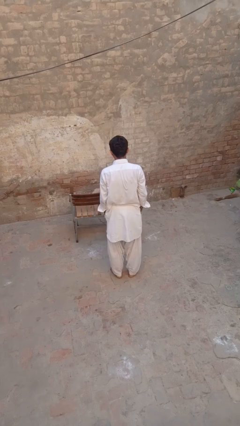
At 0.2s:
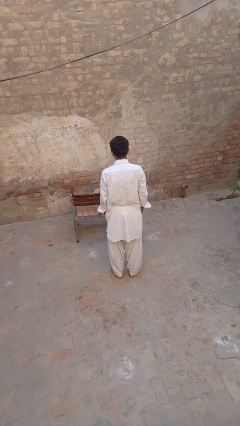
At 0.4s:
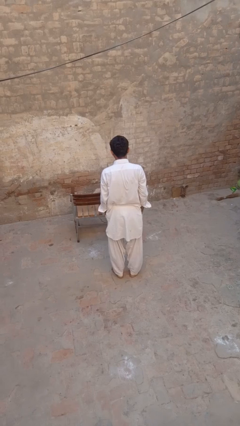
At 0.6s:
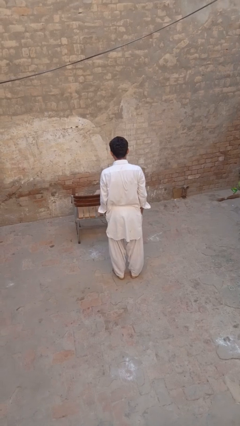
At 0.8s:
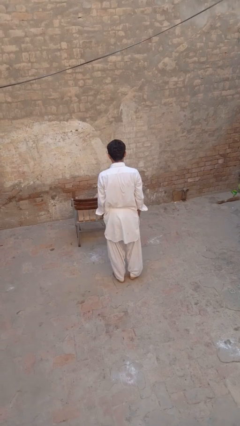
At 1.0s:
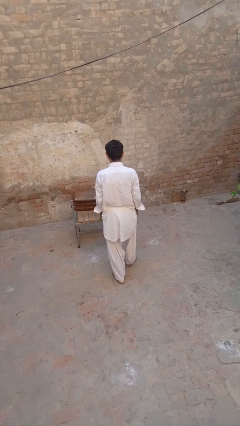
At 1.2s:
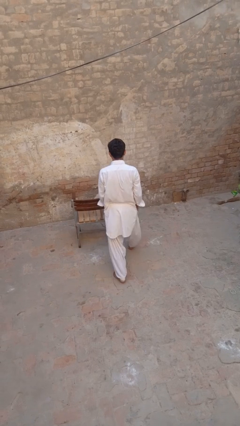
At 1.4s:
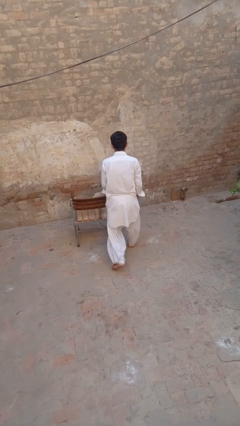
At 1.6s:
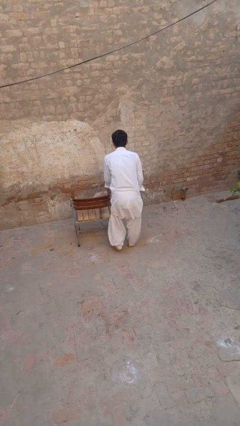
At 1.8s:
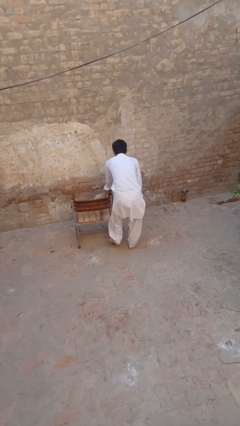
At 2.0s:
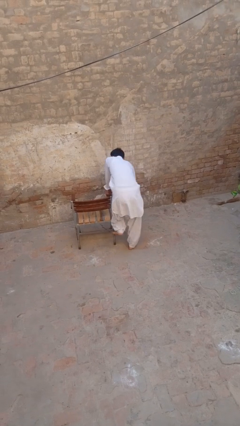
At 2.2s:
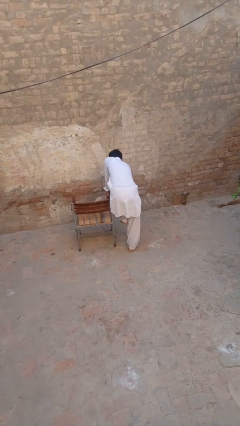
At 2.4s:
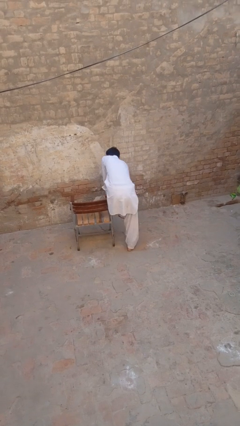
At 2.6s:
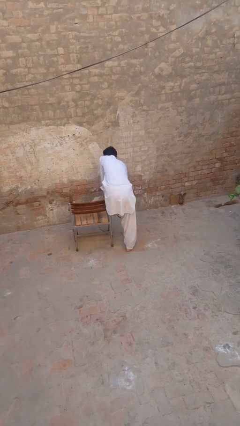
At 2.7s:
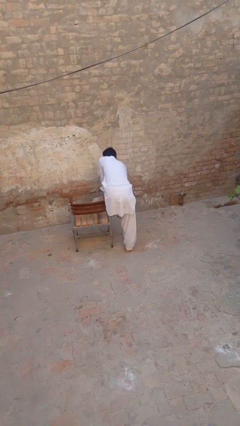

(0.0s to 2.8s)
person stubs toe

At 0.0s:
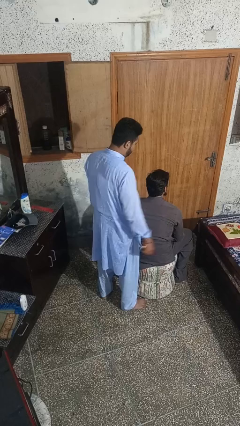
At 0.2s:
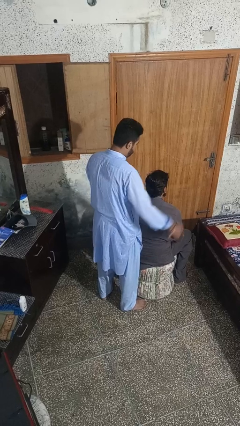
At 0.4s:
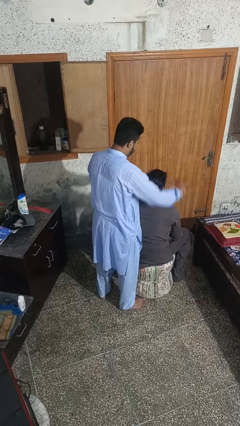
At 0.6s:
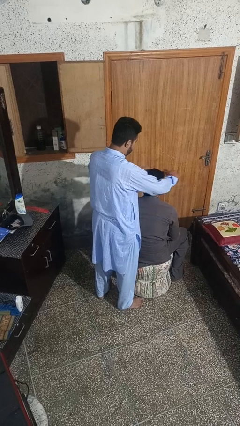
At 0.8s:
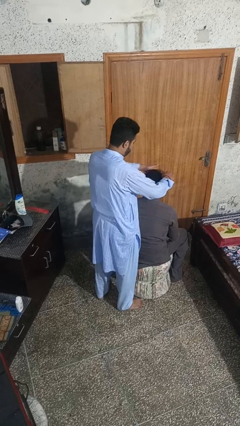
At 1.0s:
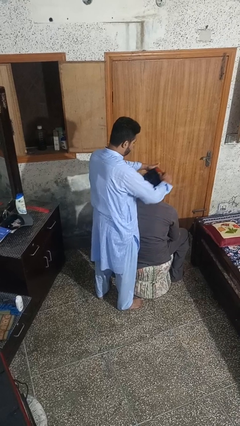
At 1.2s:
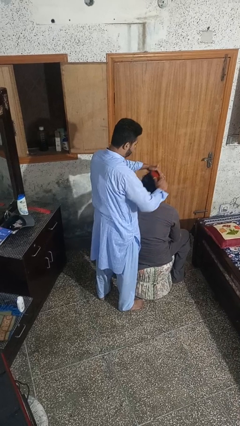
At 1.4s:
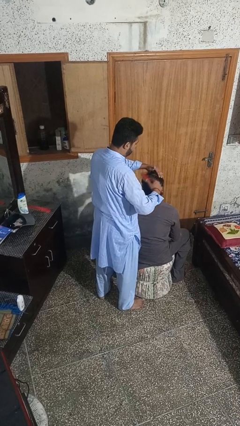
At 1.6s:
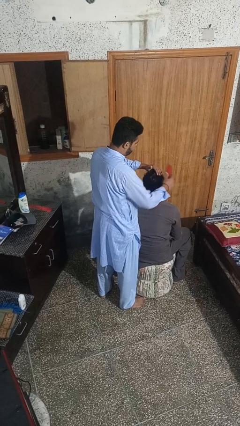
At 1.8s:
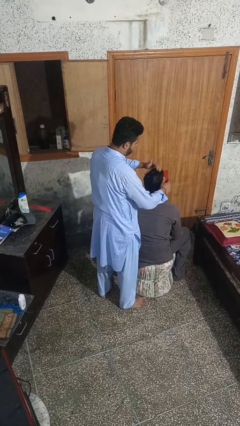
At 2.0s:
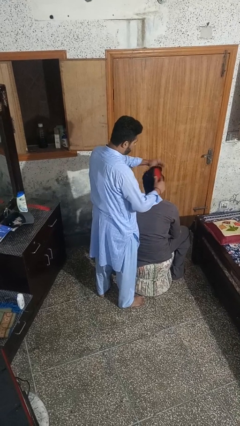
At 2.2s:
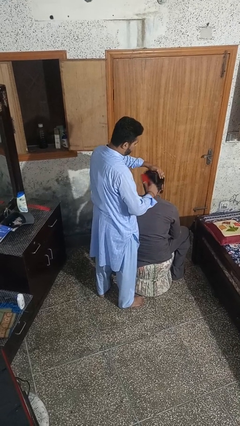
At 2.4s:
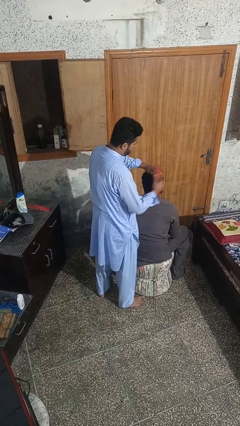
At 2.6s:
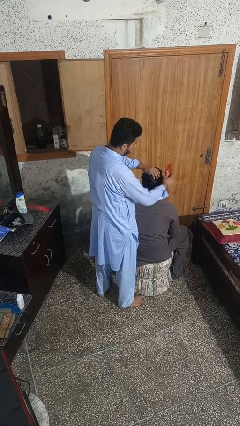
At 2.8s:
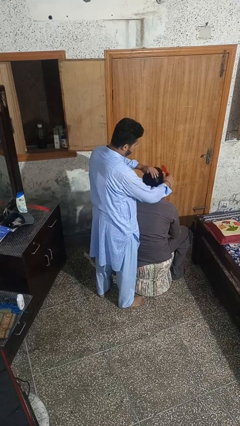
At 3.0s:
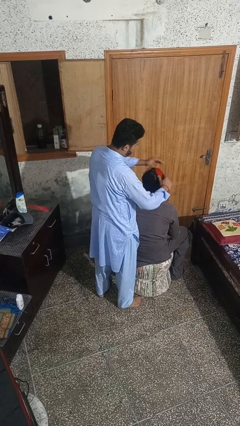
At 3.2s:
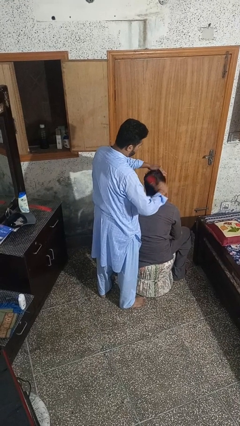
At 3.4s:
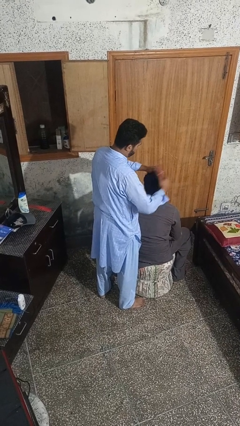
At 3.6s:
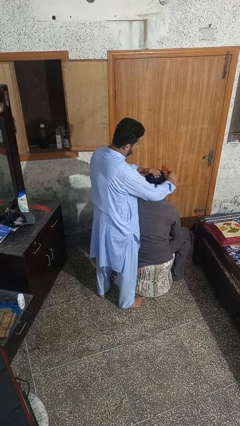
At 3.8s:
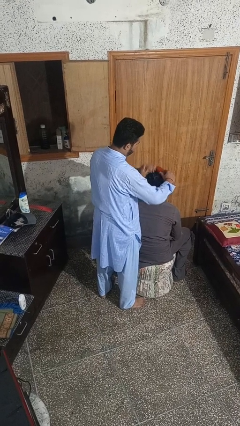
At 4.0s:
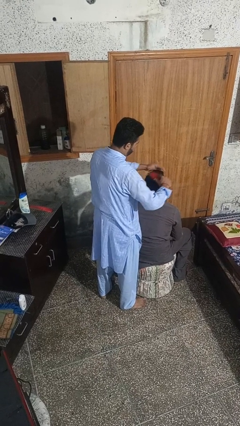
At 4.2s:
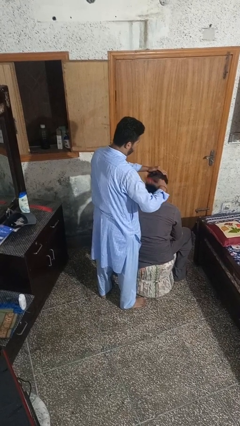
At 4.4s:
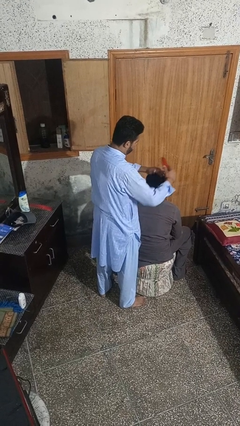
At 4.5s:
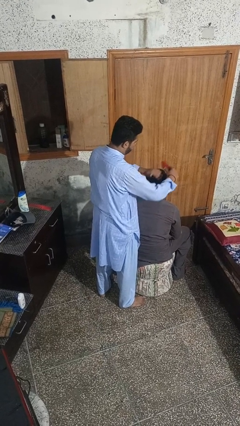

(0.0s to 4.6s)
person brushes hair of person

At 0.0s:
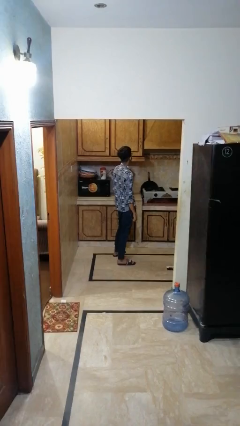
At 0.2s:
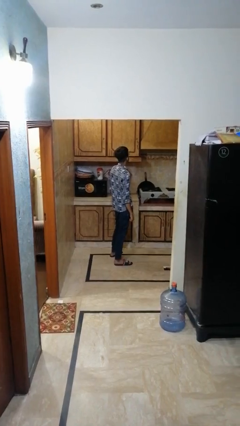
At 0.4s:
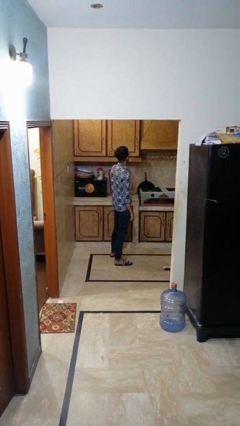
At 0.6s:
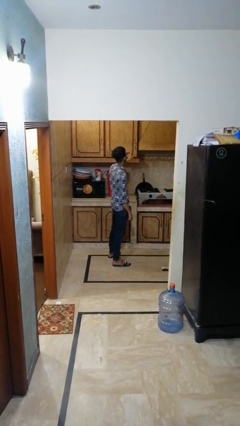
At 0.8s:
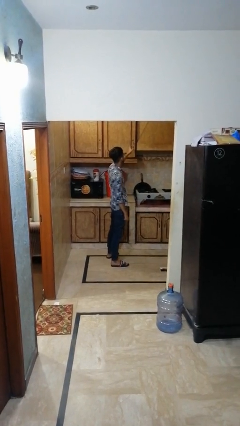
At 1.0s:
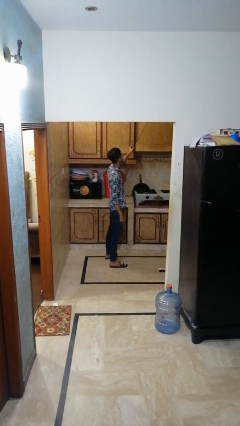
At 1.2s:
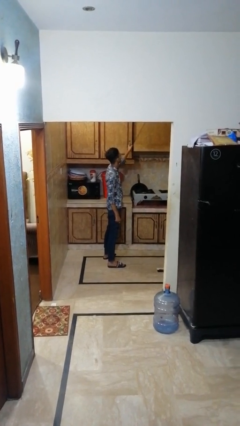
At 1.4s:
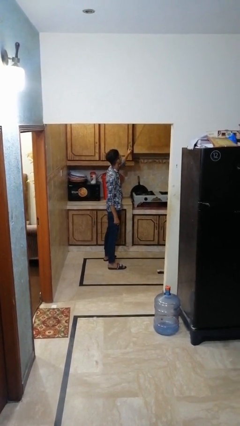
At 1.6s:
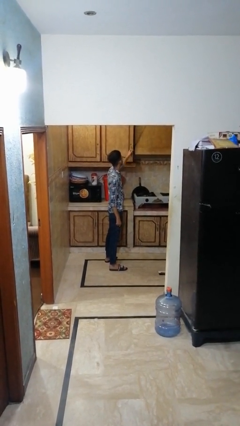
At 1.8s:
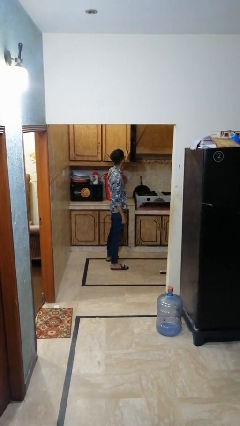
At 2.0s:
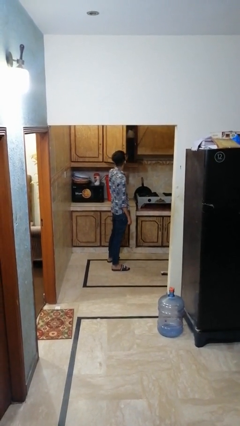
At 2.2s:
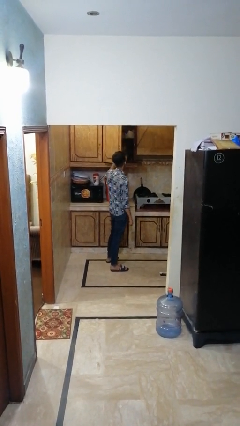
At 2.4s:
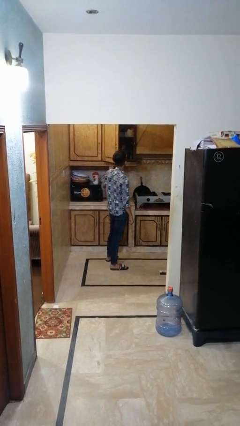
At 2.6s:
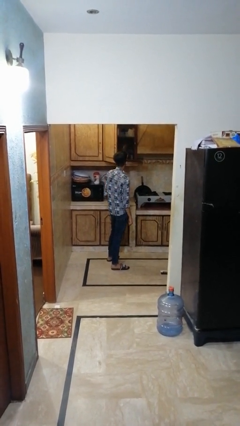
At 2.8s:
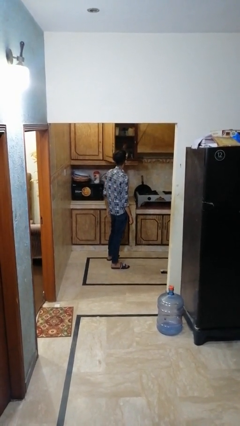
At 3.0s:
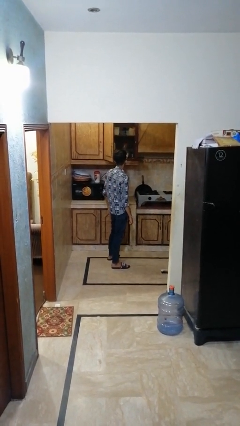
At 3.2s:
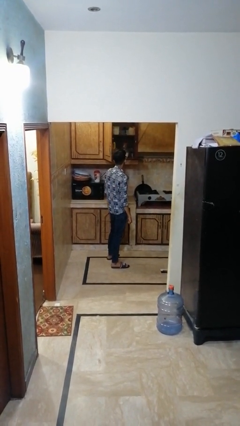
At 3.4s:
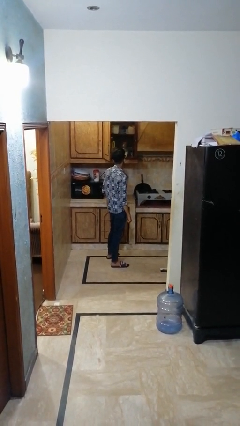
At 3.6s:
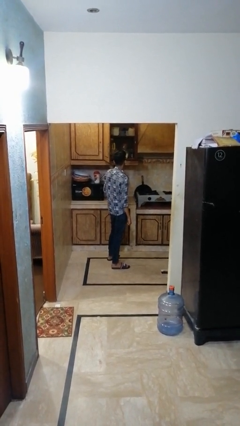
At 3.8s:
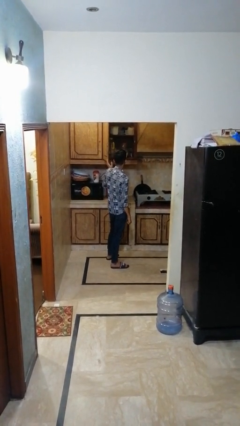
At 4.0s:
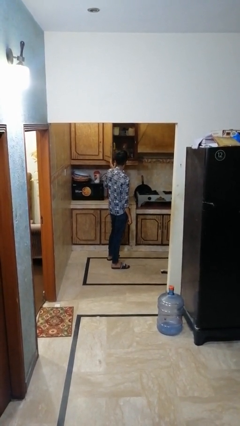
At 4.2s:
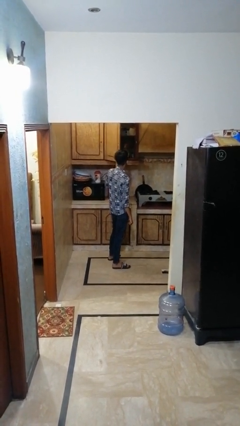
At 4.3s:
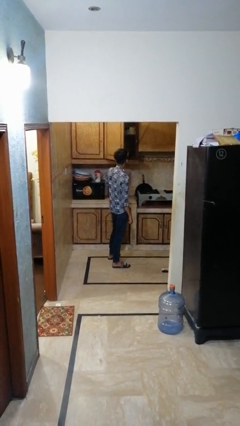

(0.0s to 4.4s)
person opens cabinet

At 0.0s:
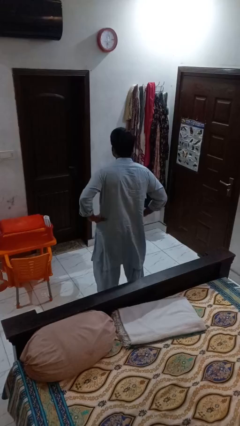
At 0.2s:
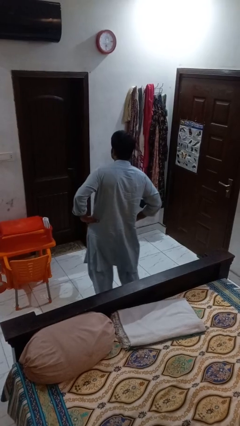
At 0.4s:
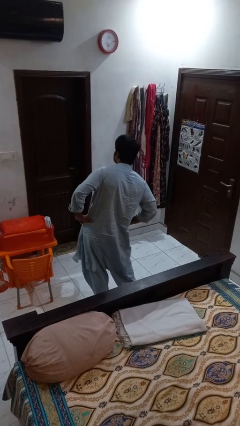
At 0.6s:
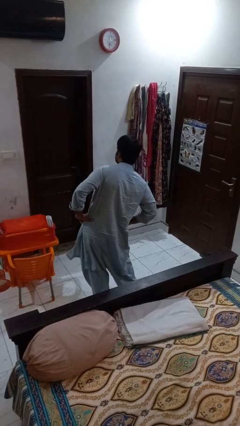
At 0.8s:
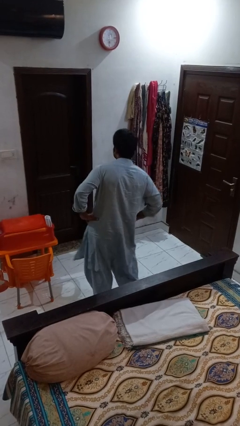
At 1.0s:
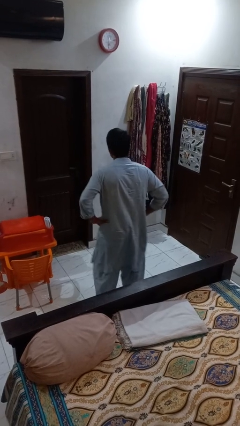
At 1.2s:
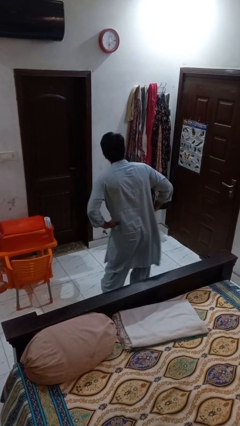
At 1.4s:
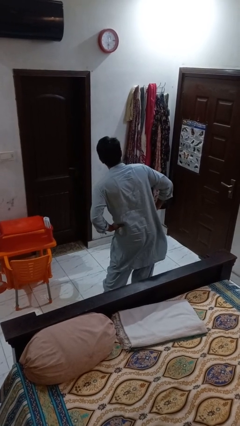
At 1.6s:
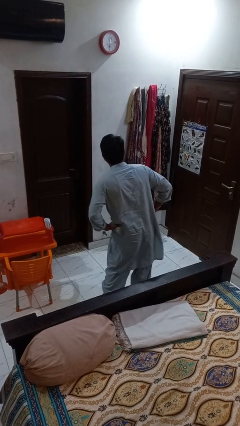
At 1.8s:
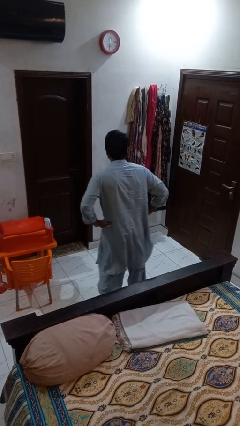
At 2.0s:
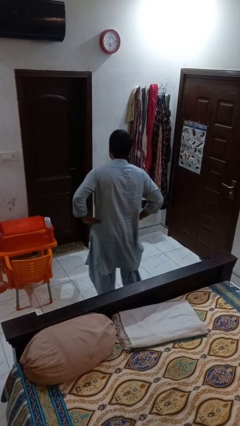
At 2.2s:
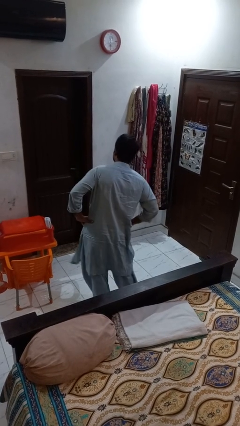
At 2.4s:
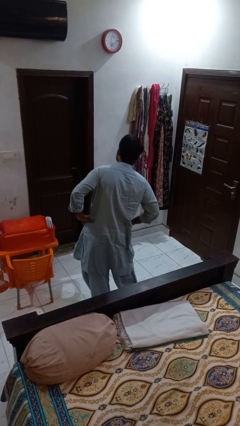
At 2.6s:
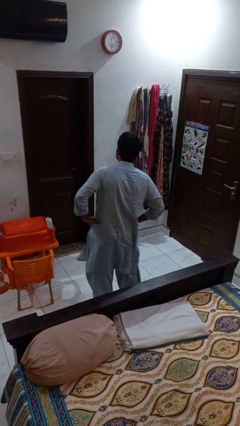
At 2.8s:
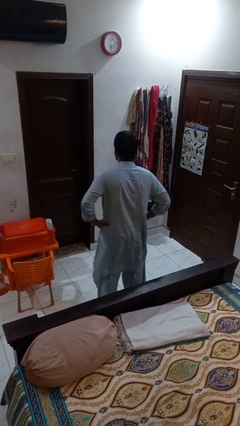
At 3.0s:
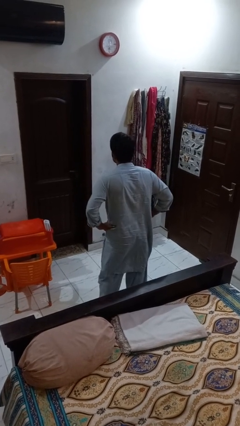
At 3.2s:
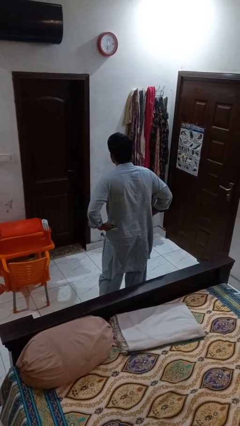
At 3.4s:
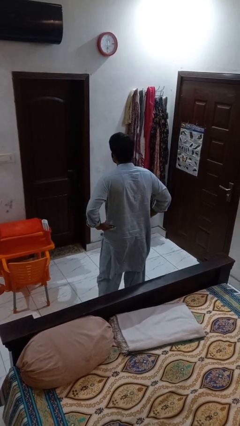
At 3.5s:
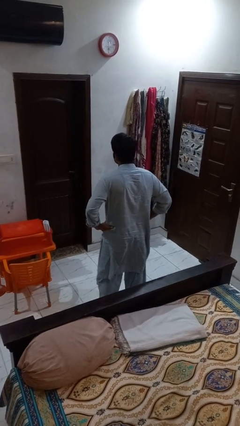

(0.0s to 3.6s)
person wiggles hips

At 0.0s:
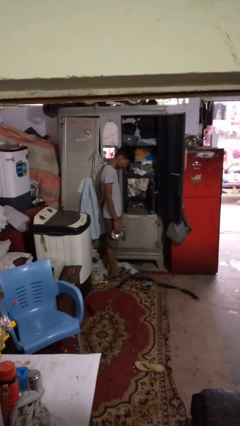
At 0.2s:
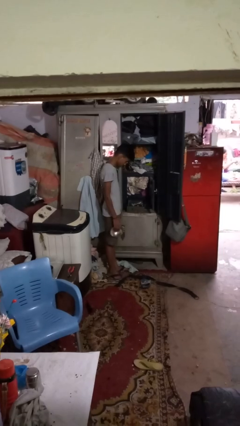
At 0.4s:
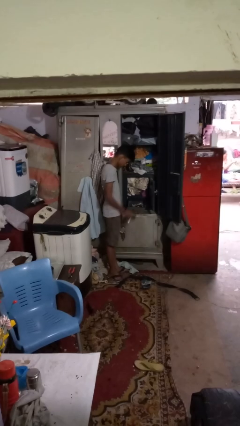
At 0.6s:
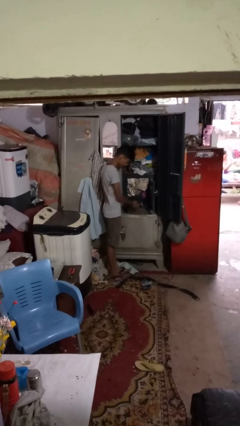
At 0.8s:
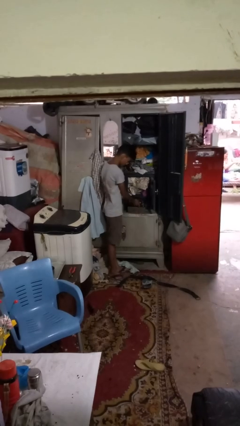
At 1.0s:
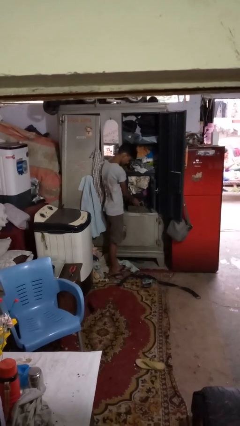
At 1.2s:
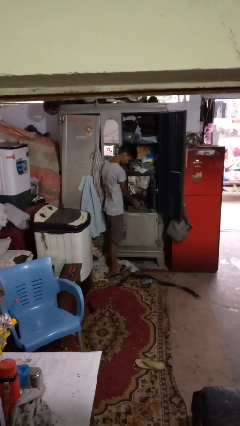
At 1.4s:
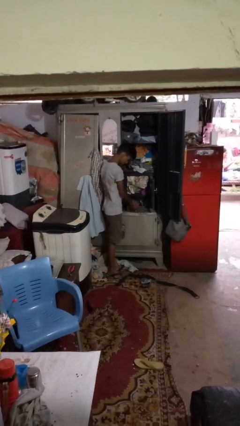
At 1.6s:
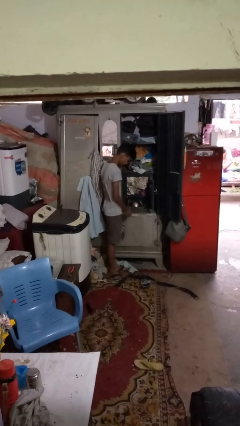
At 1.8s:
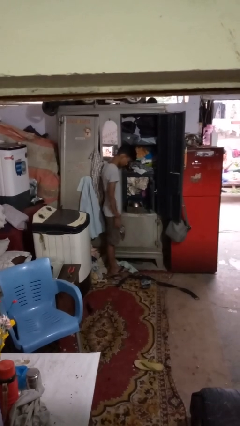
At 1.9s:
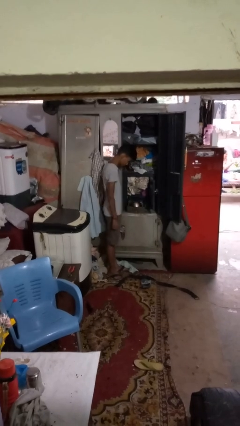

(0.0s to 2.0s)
person puts clothes into dresser

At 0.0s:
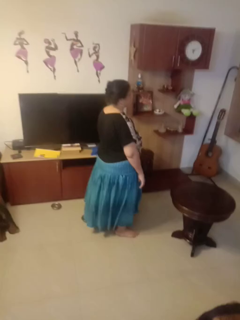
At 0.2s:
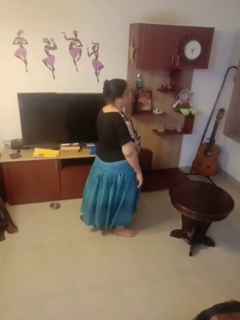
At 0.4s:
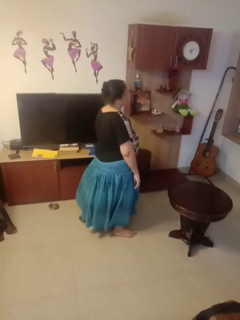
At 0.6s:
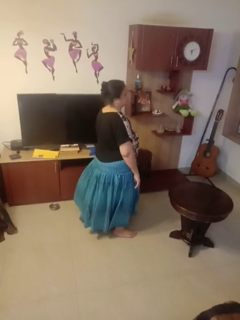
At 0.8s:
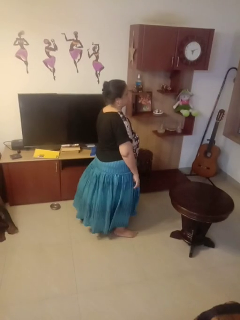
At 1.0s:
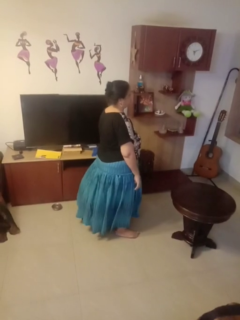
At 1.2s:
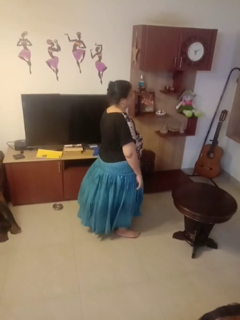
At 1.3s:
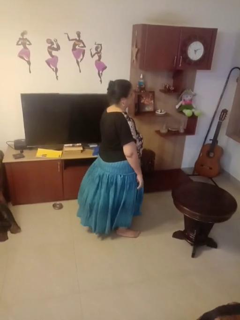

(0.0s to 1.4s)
person shakes head
